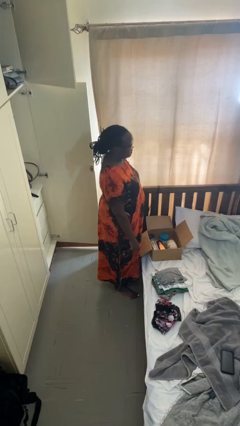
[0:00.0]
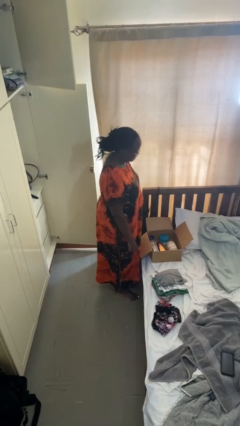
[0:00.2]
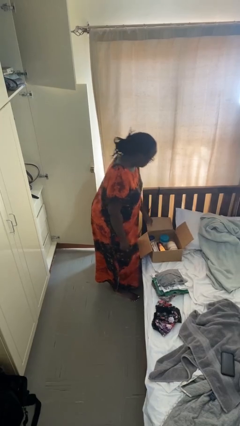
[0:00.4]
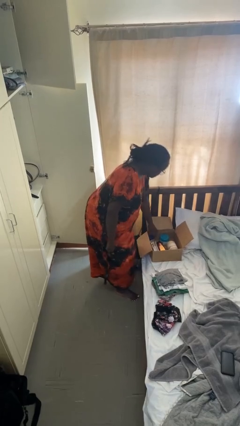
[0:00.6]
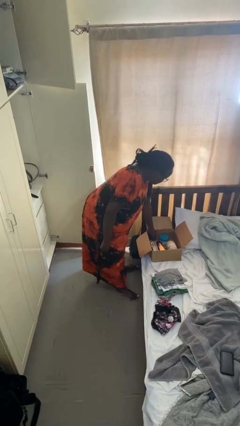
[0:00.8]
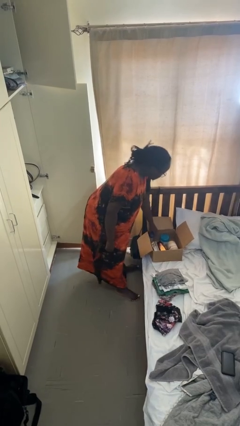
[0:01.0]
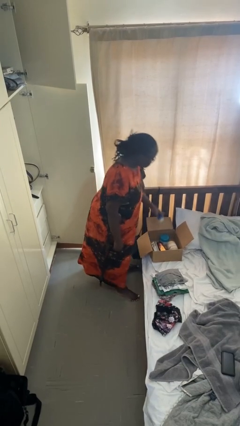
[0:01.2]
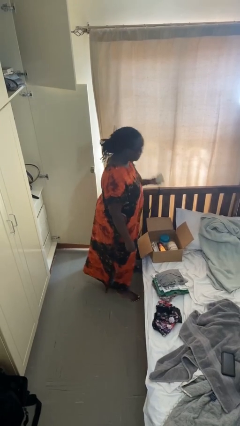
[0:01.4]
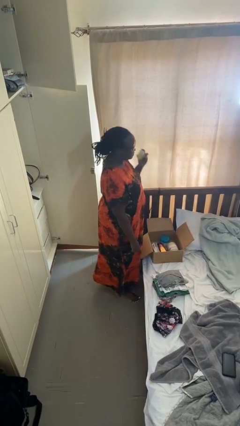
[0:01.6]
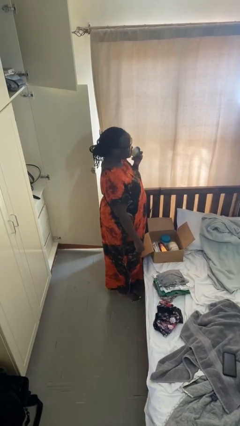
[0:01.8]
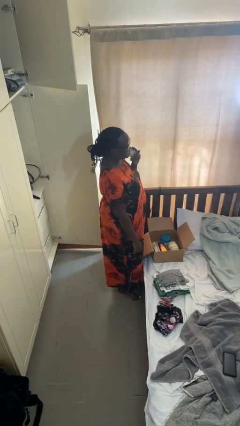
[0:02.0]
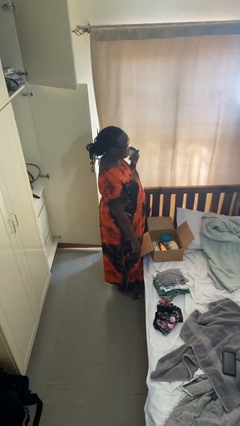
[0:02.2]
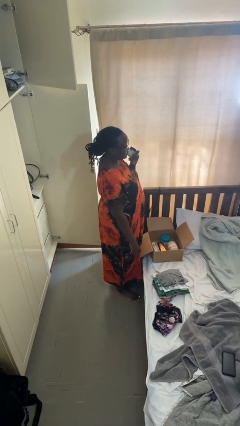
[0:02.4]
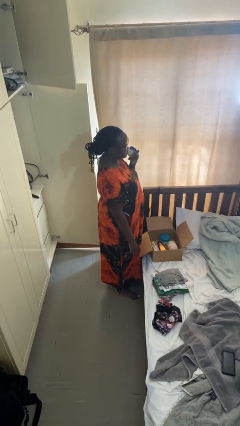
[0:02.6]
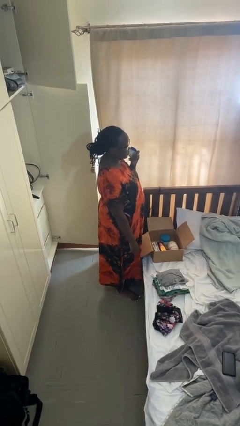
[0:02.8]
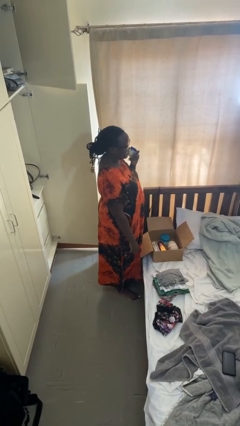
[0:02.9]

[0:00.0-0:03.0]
person takes object from box

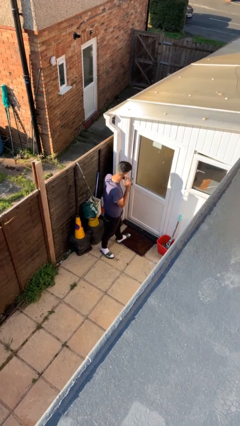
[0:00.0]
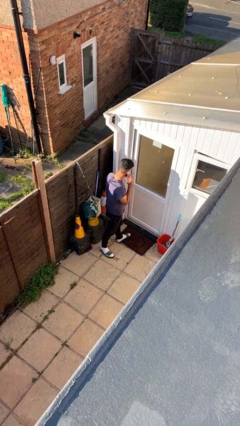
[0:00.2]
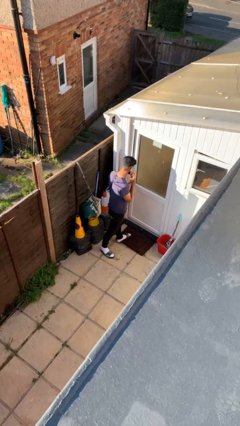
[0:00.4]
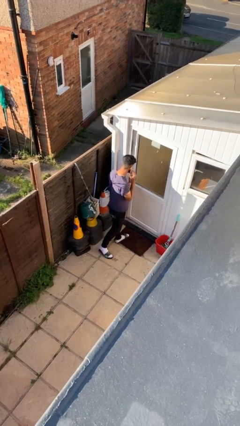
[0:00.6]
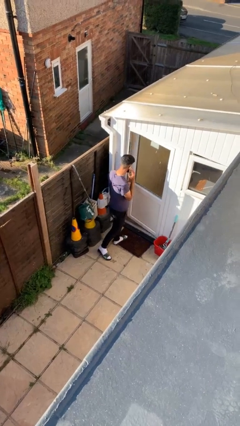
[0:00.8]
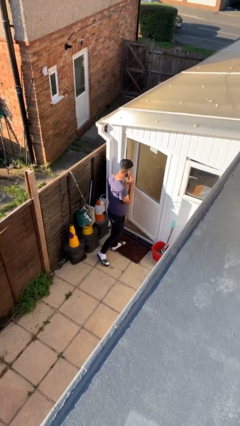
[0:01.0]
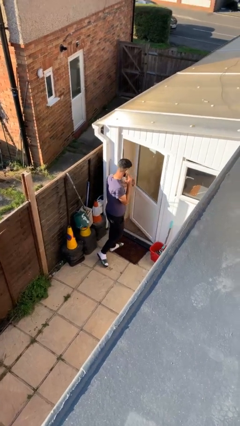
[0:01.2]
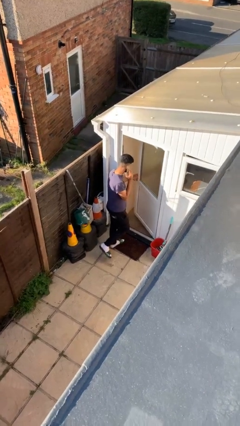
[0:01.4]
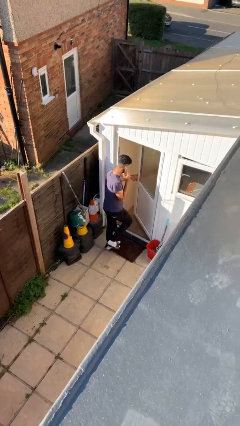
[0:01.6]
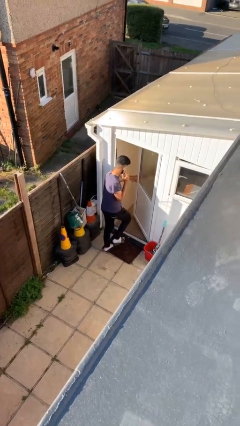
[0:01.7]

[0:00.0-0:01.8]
person opens facility door

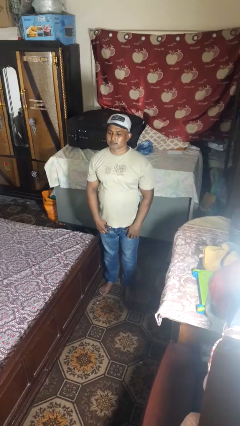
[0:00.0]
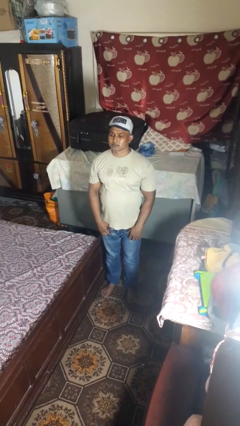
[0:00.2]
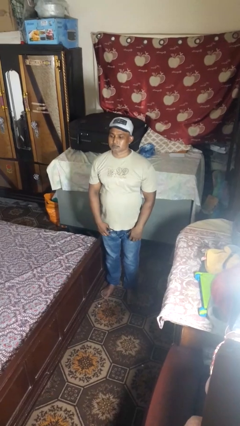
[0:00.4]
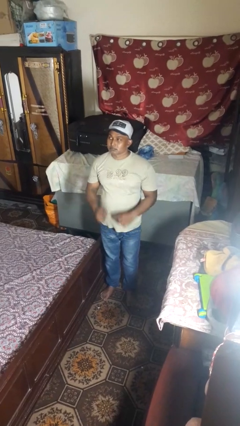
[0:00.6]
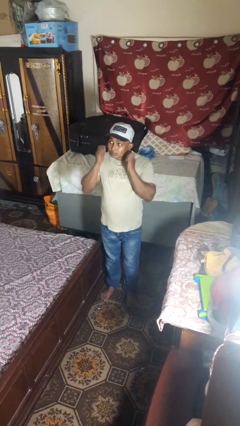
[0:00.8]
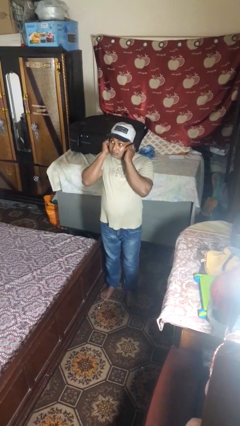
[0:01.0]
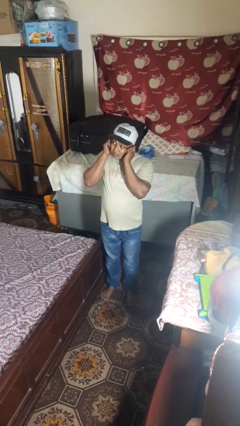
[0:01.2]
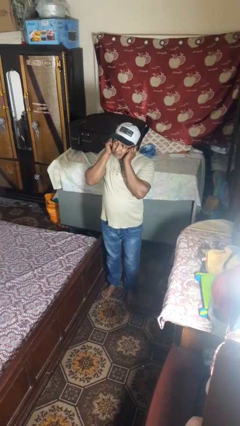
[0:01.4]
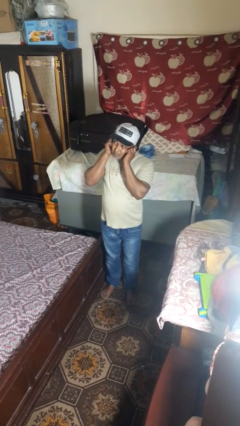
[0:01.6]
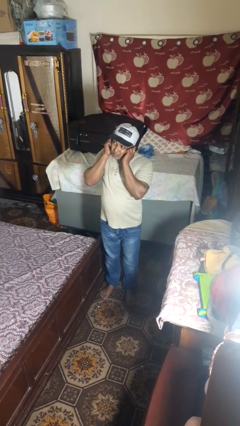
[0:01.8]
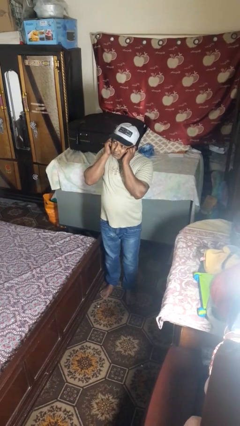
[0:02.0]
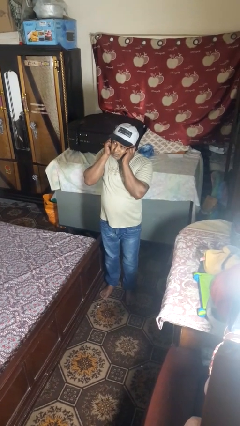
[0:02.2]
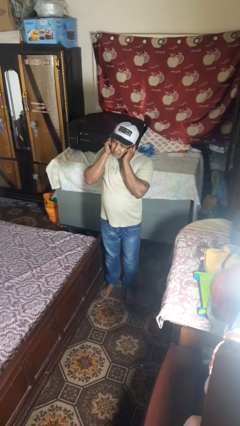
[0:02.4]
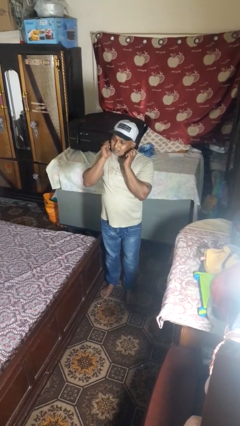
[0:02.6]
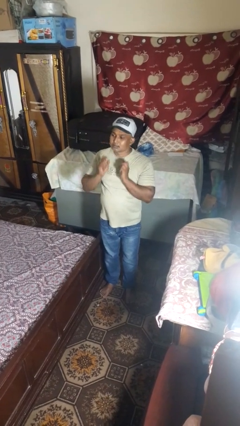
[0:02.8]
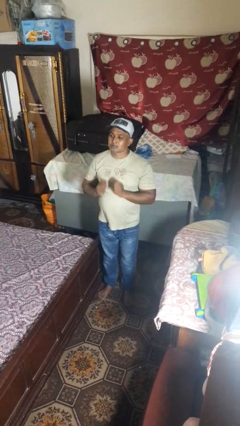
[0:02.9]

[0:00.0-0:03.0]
person puts fingers in ear

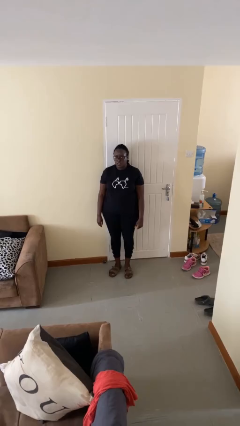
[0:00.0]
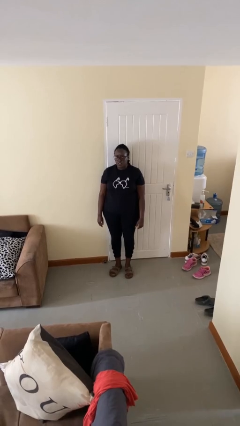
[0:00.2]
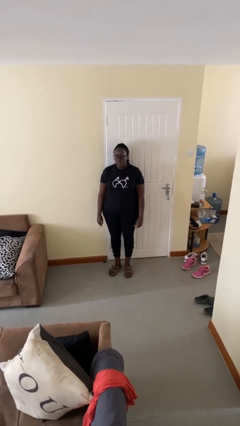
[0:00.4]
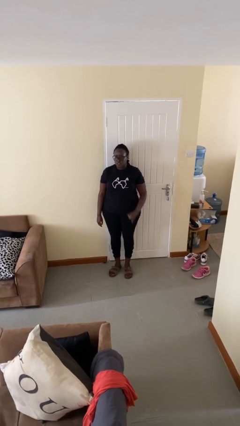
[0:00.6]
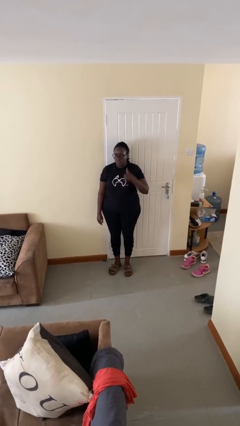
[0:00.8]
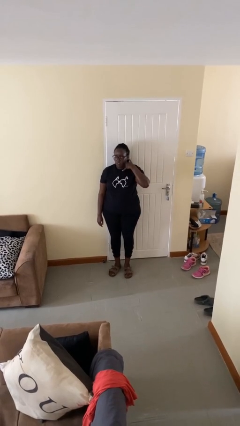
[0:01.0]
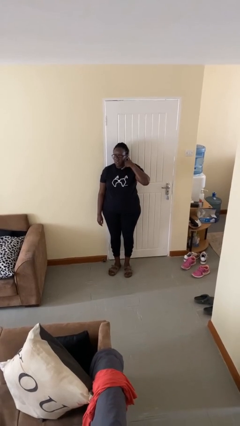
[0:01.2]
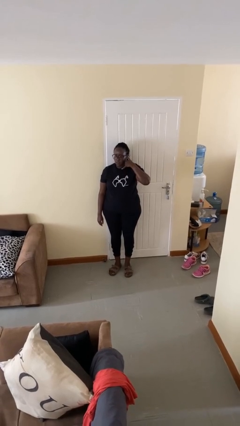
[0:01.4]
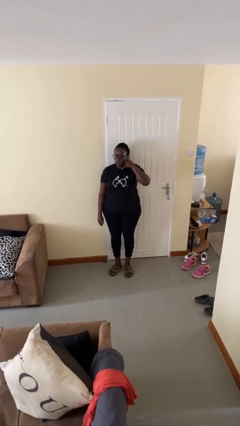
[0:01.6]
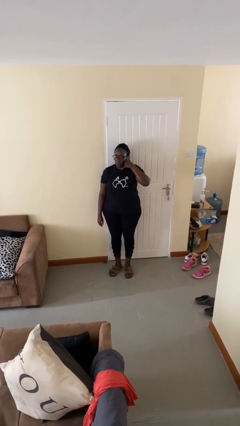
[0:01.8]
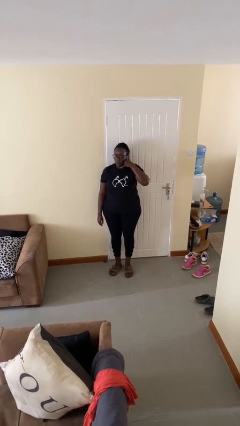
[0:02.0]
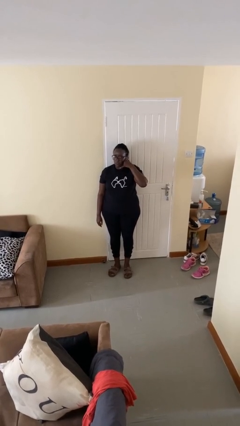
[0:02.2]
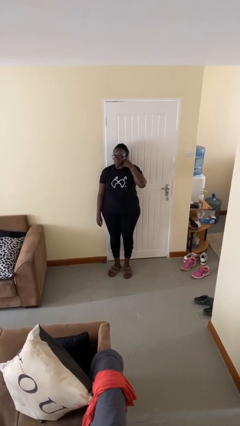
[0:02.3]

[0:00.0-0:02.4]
person gestures call me

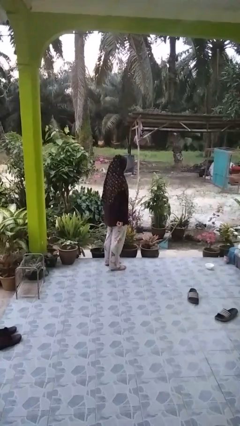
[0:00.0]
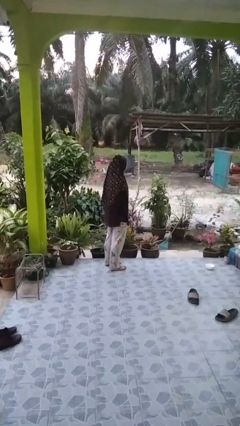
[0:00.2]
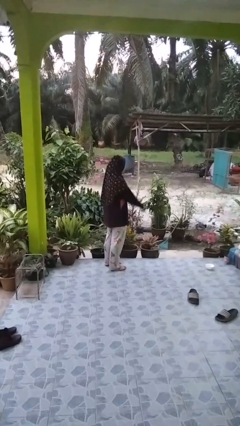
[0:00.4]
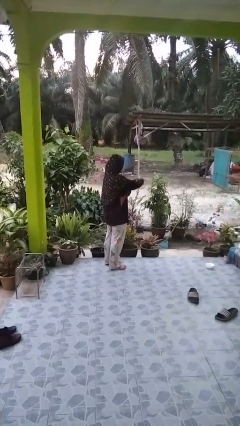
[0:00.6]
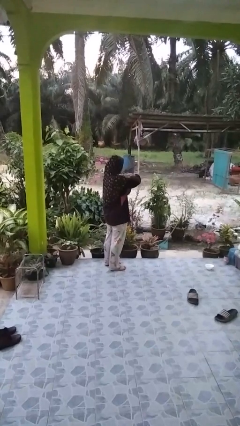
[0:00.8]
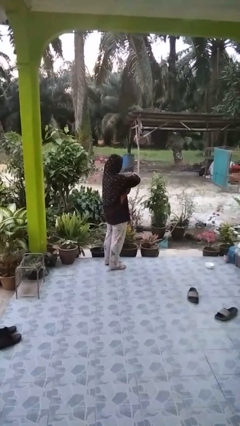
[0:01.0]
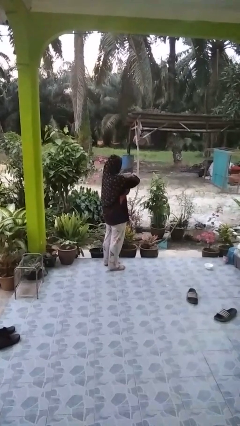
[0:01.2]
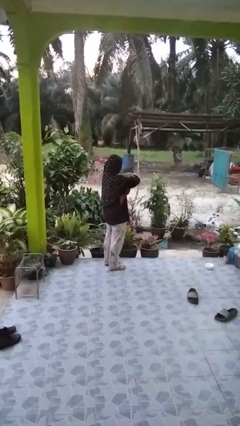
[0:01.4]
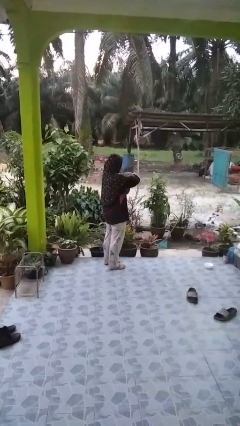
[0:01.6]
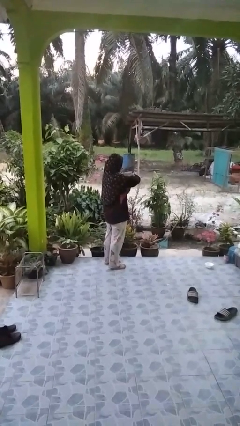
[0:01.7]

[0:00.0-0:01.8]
person looks at wristwatch

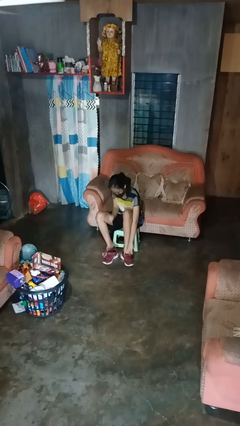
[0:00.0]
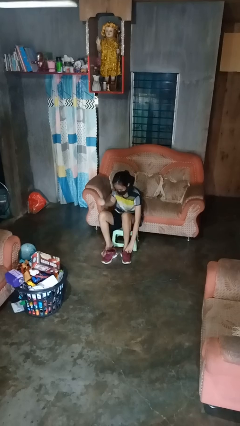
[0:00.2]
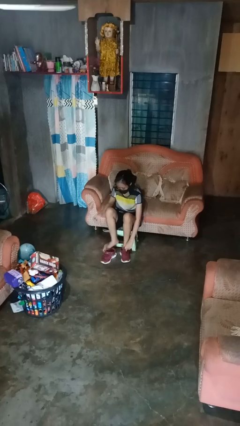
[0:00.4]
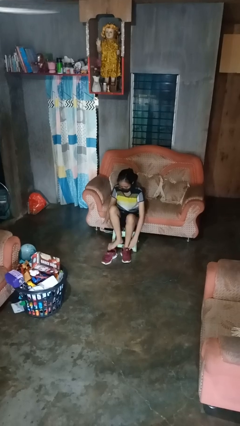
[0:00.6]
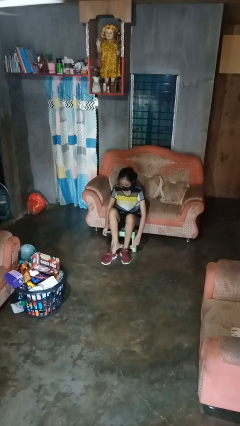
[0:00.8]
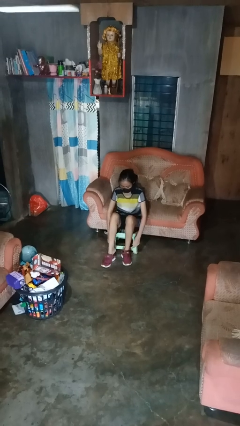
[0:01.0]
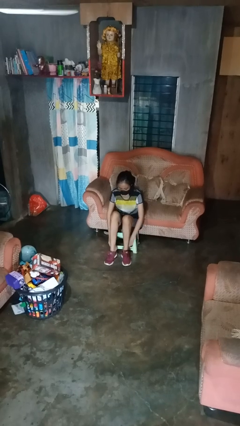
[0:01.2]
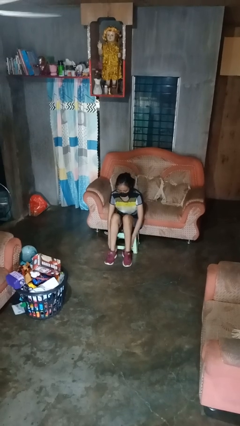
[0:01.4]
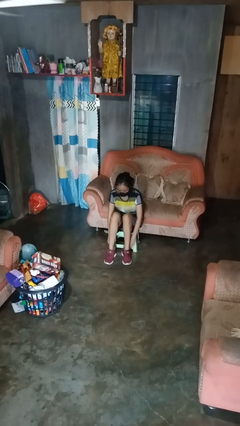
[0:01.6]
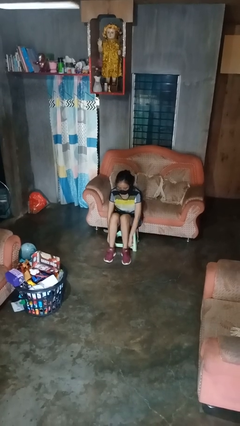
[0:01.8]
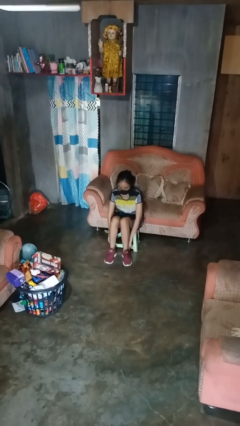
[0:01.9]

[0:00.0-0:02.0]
person puts on shoes

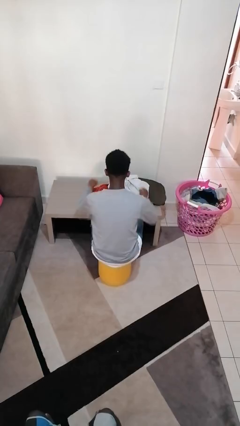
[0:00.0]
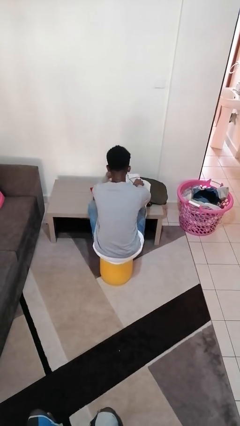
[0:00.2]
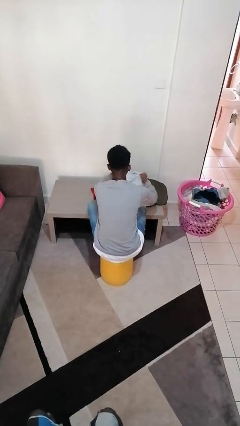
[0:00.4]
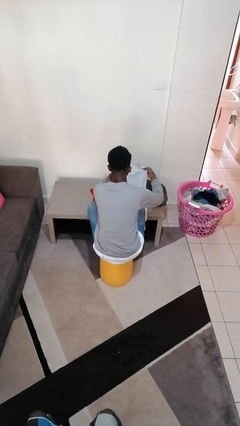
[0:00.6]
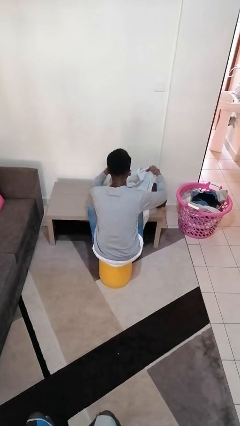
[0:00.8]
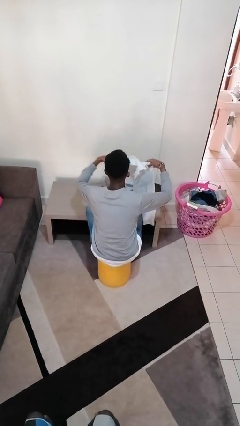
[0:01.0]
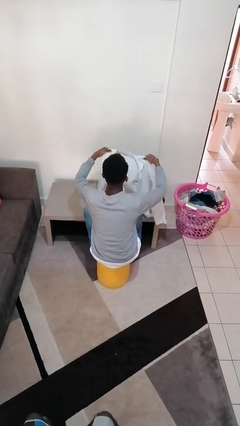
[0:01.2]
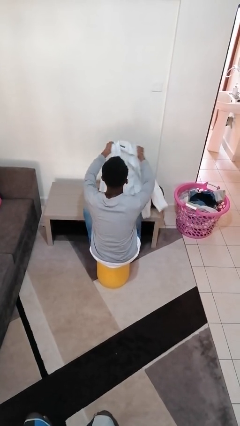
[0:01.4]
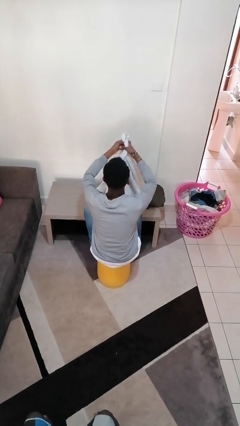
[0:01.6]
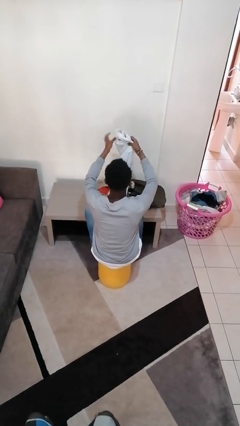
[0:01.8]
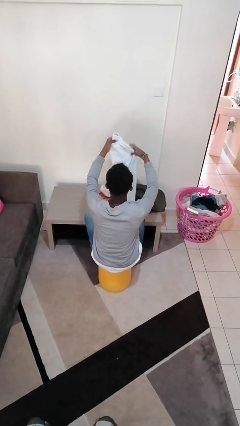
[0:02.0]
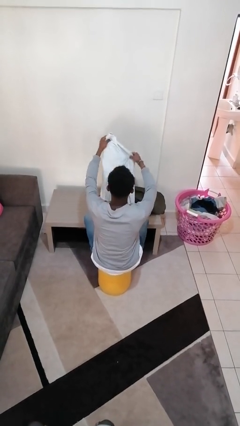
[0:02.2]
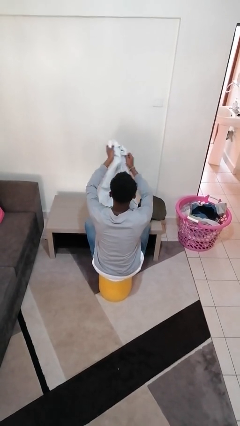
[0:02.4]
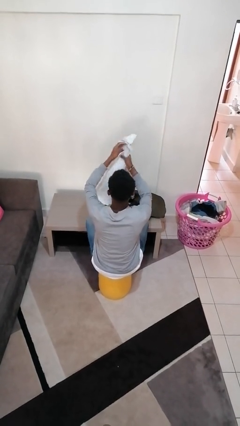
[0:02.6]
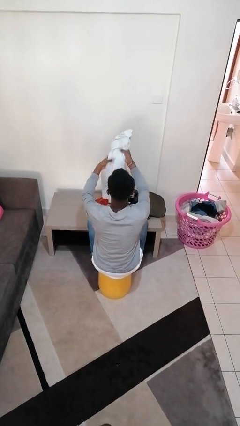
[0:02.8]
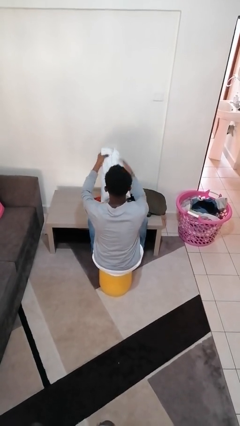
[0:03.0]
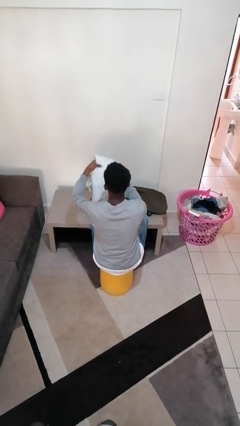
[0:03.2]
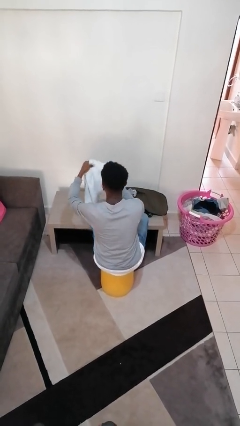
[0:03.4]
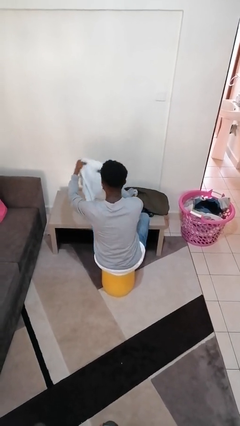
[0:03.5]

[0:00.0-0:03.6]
person folds shirt
